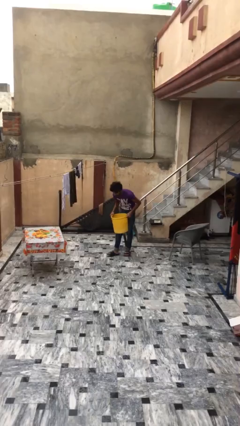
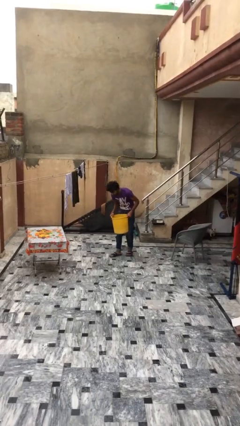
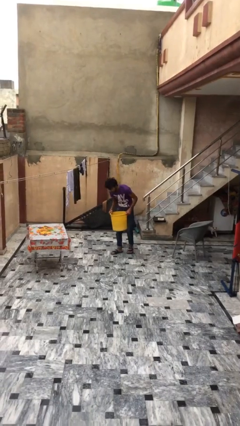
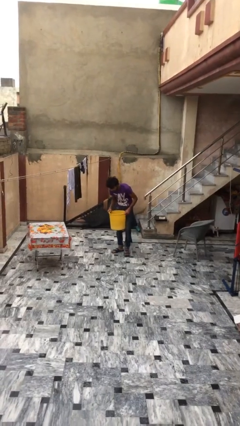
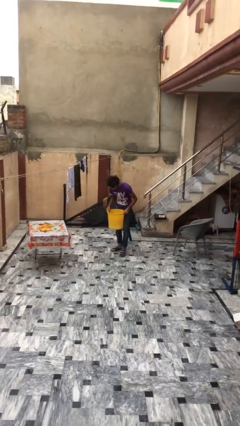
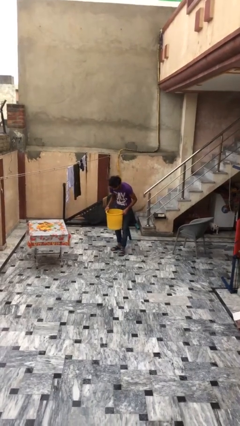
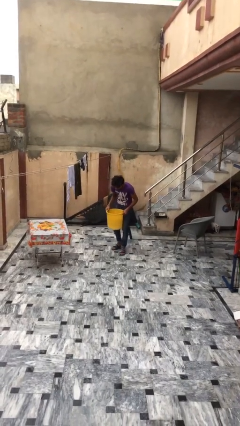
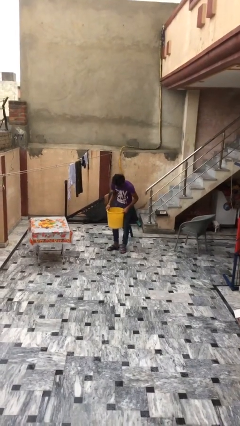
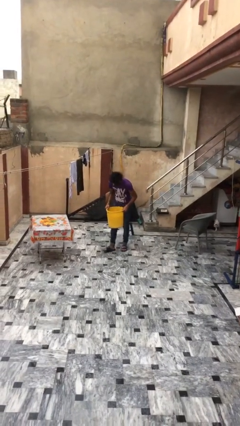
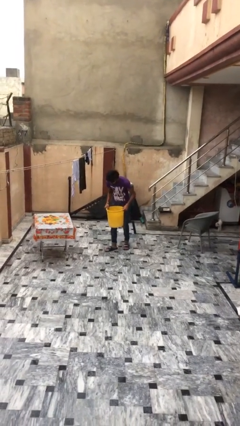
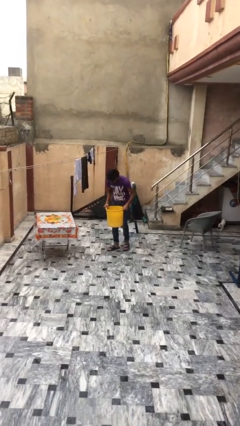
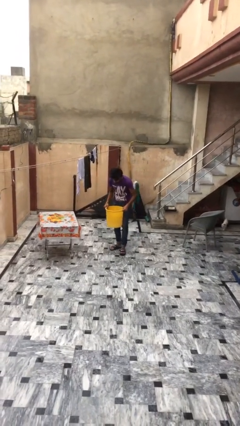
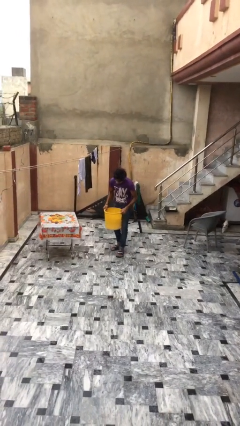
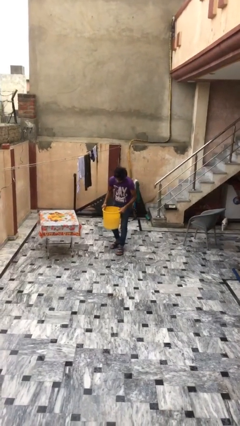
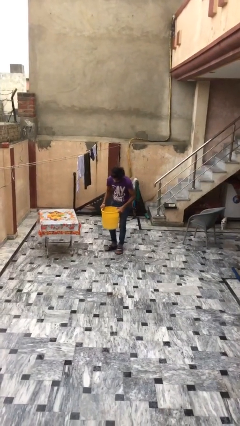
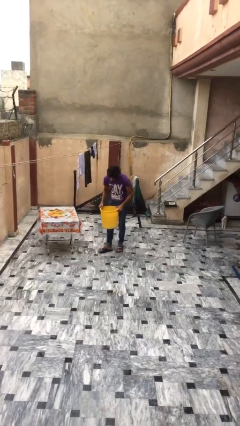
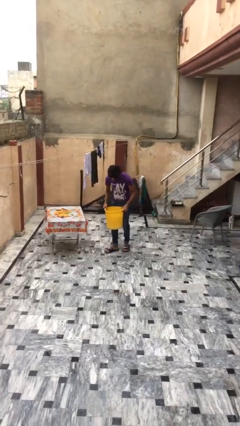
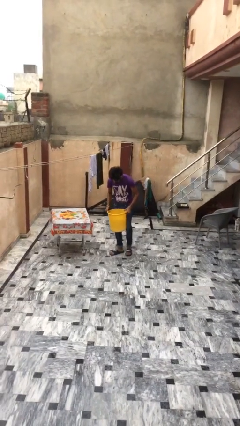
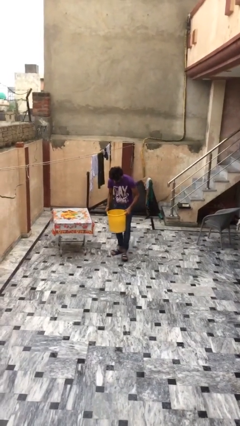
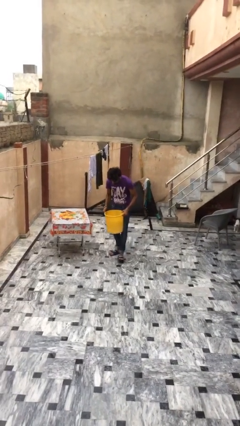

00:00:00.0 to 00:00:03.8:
person carries heavy object

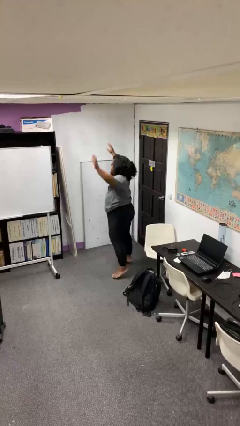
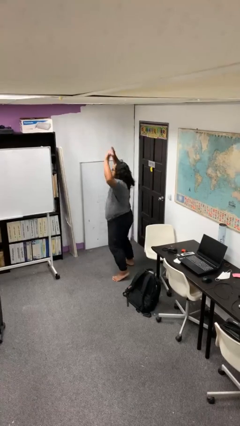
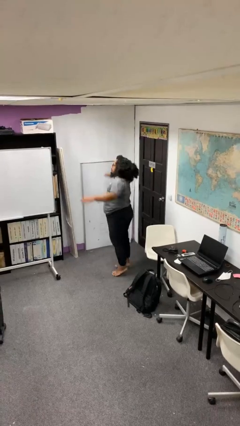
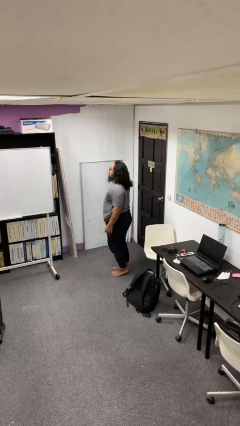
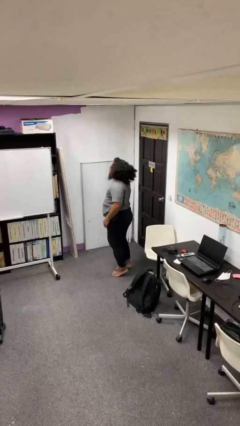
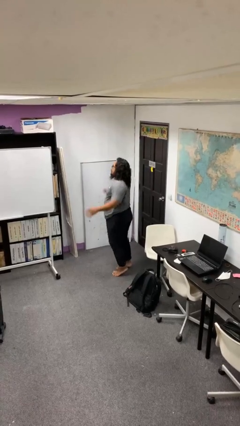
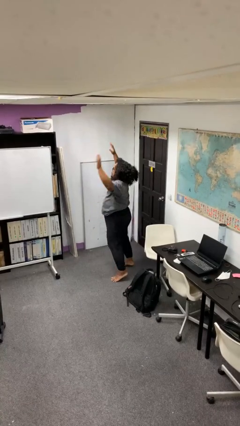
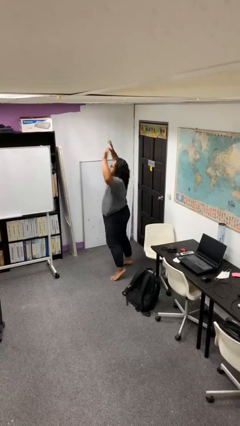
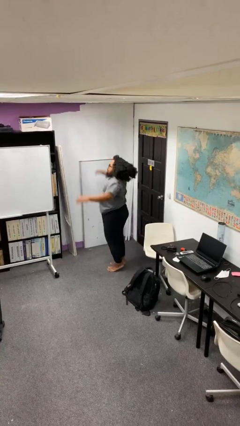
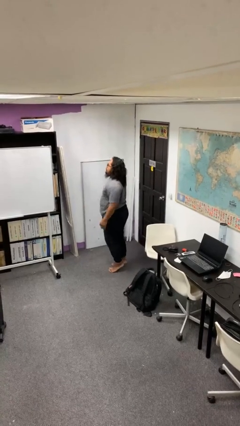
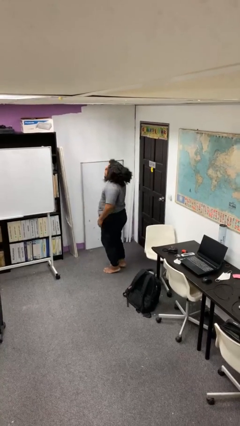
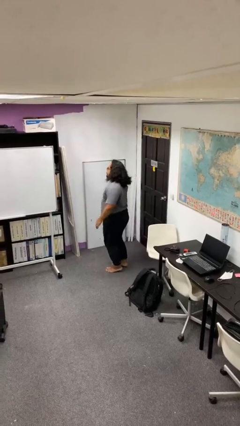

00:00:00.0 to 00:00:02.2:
person exercises with jumping jacks

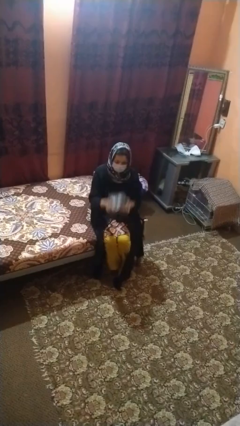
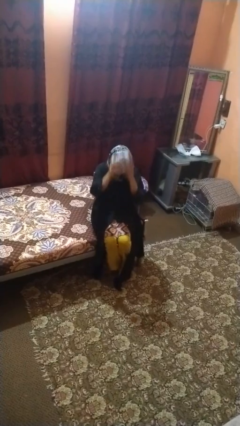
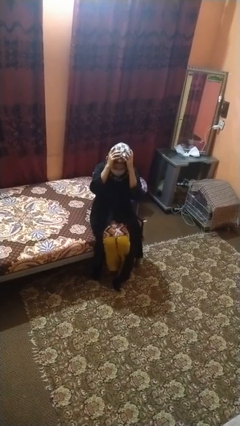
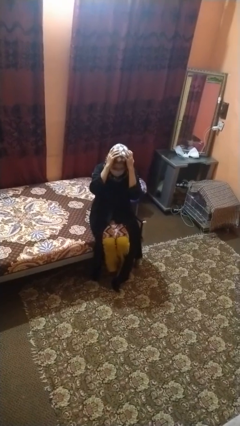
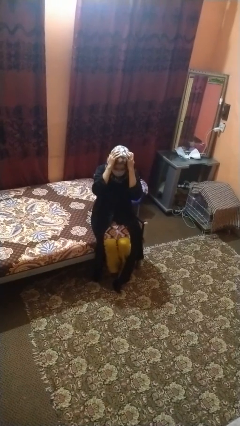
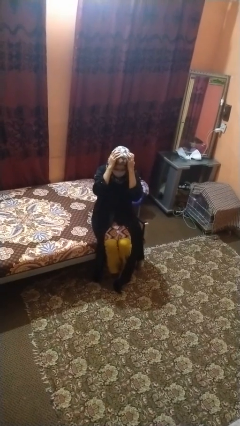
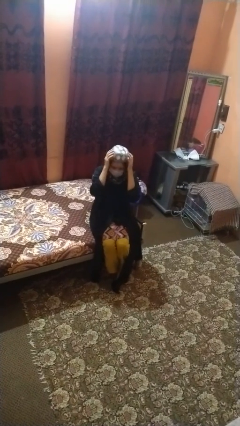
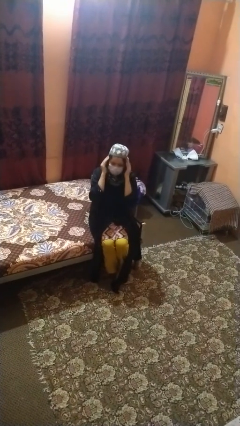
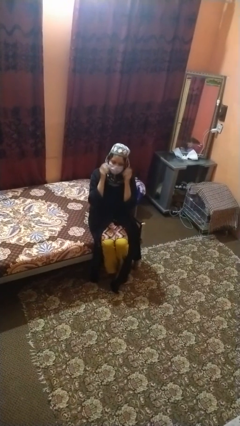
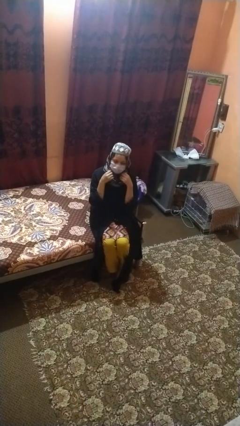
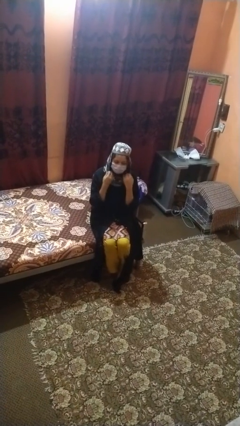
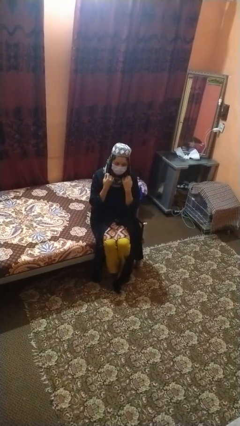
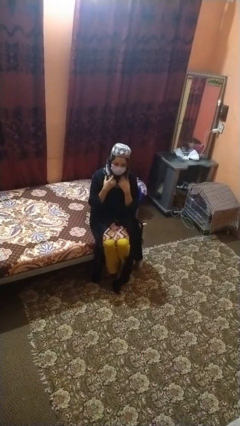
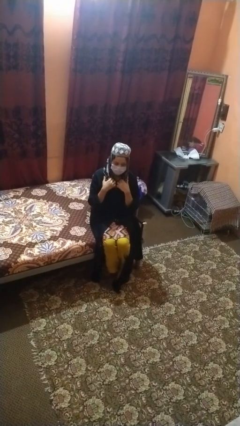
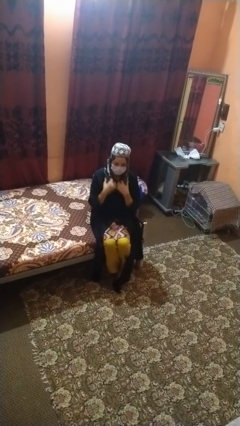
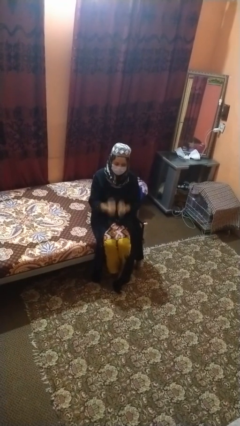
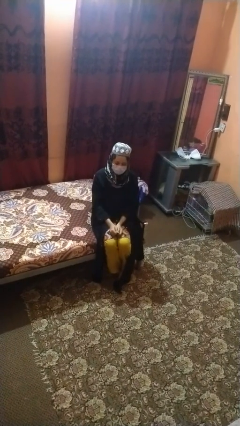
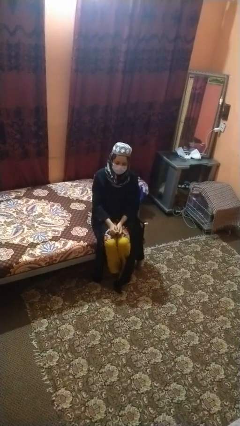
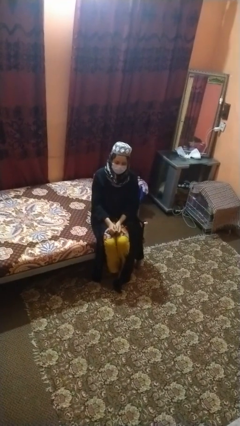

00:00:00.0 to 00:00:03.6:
person puts on hat

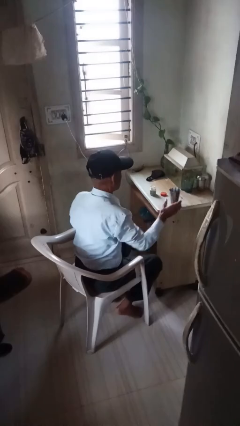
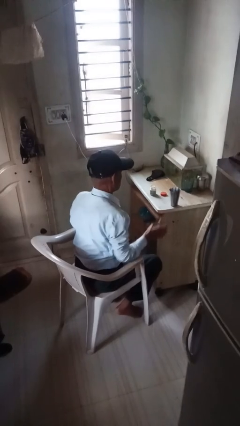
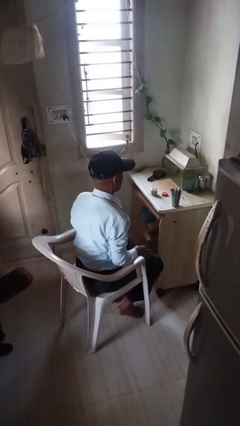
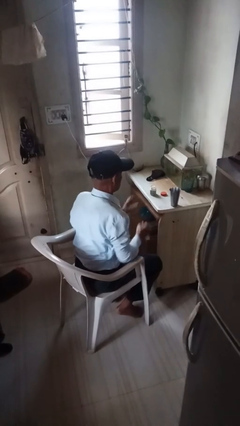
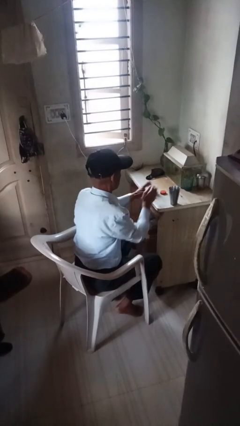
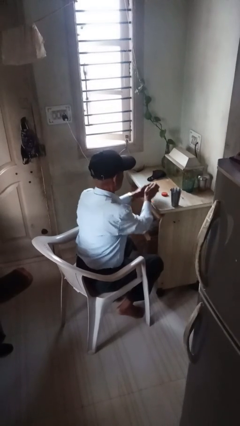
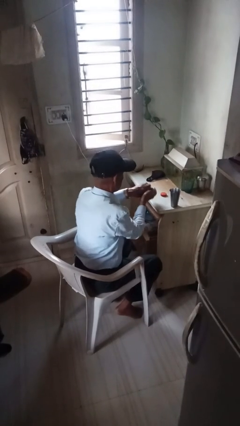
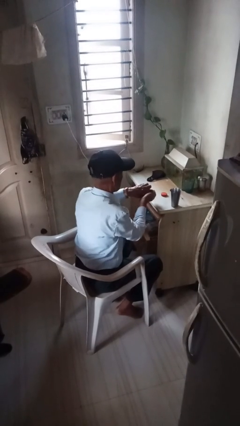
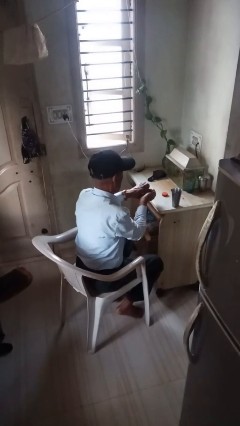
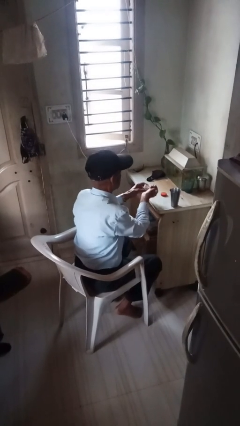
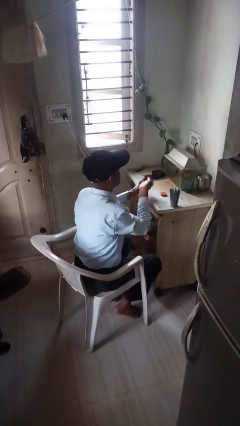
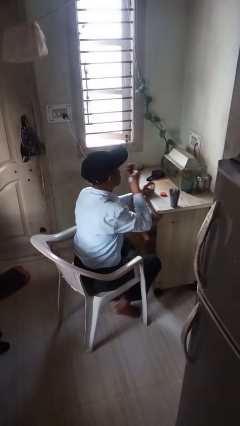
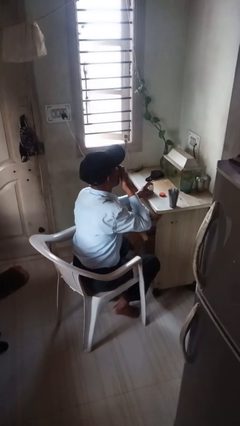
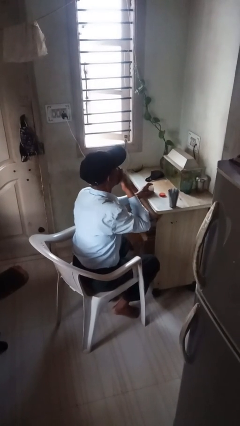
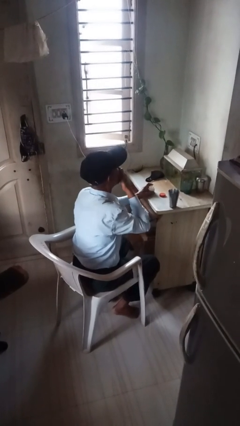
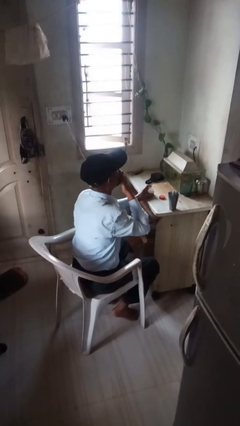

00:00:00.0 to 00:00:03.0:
person takes medicine pills

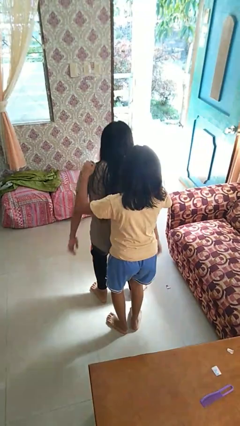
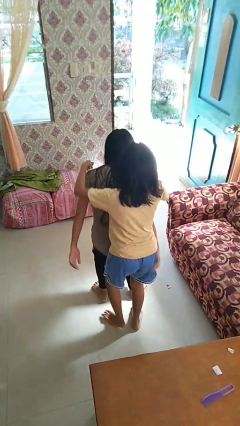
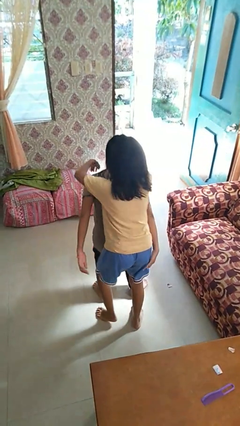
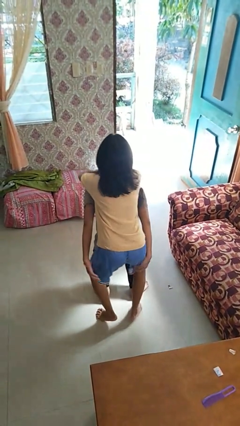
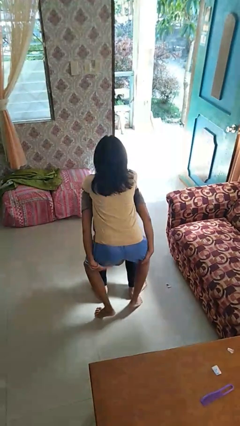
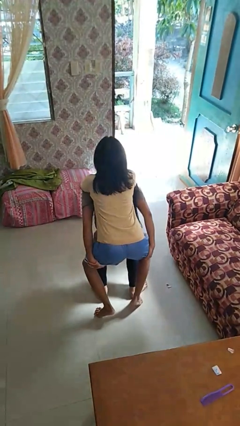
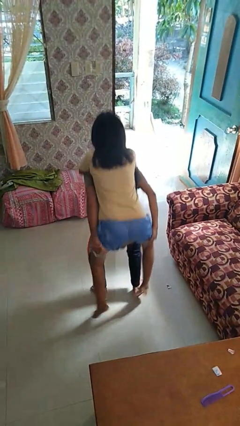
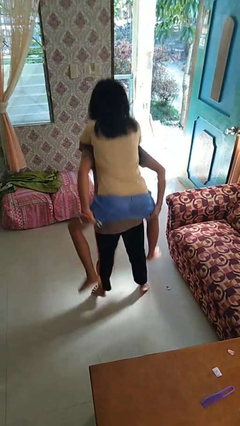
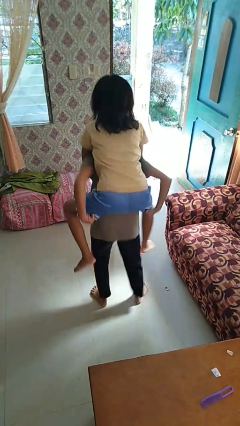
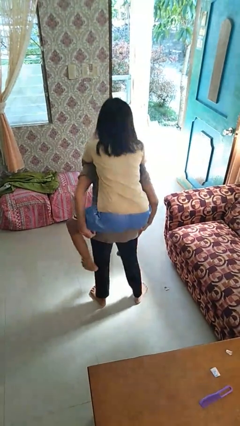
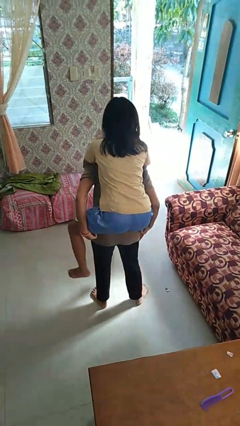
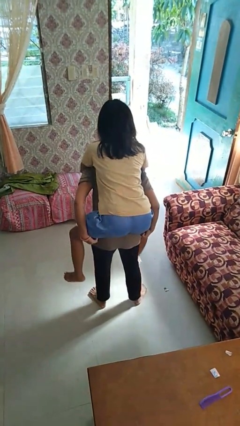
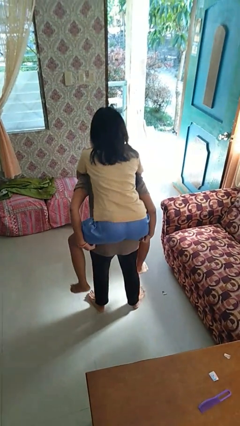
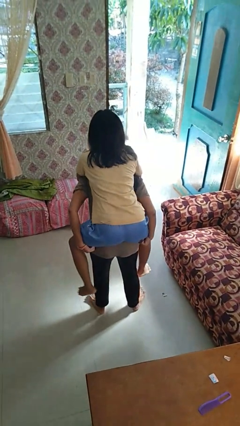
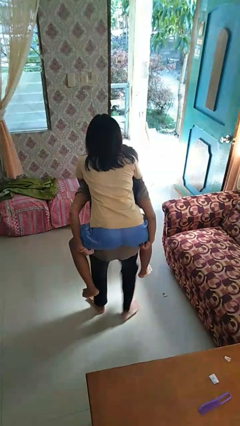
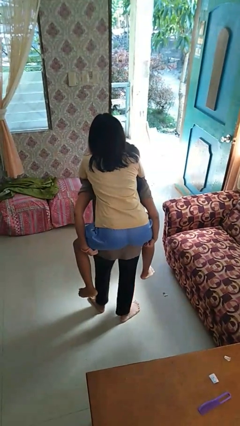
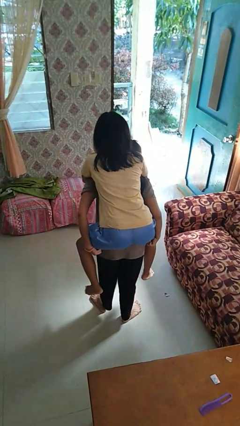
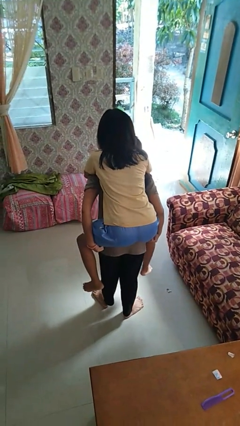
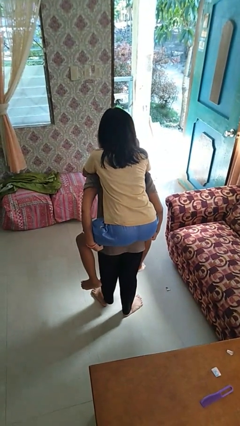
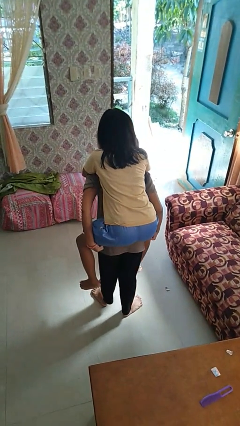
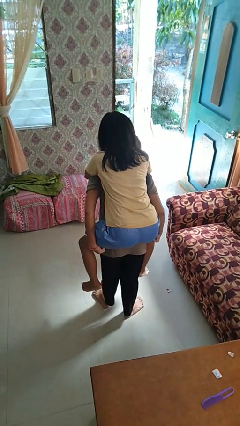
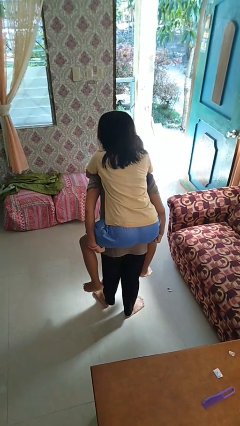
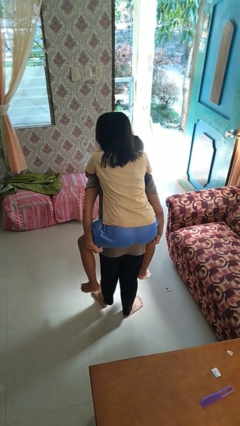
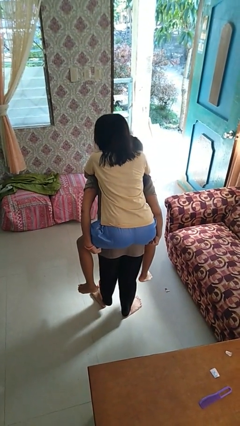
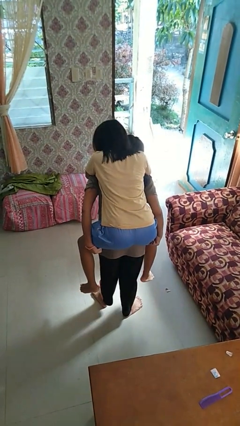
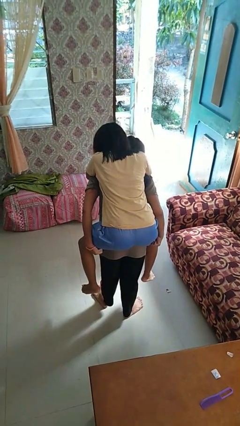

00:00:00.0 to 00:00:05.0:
person carries person on back
